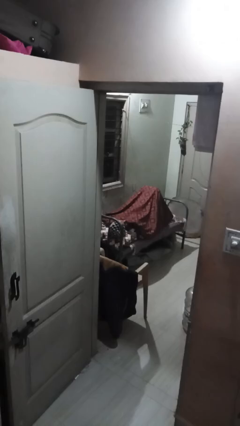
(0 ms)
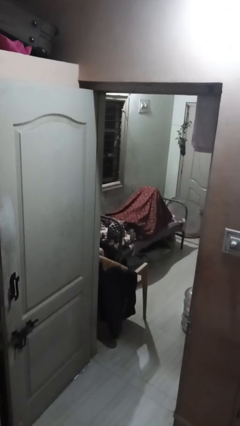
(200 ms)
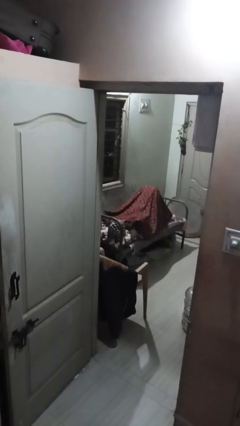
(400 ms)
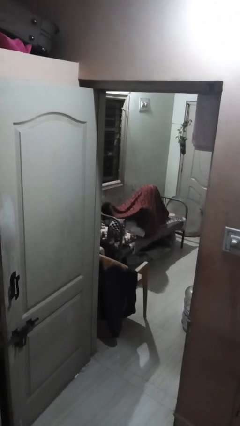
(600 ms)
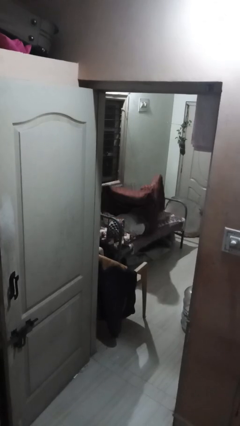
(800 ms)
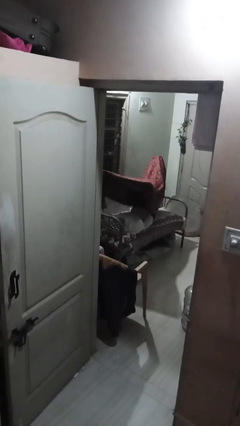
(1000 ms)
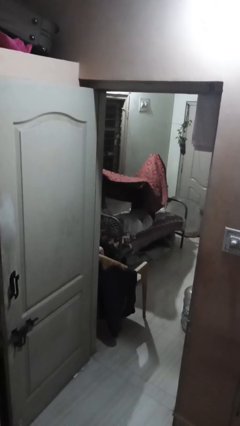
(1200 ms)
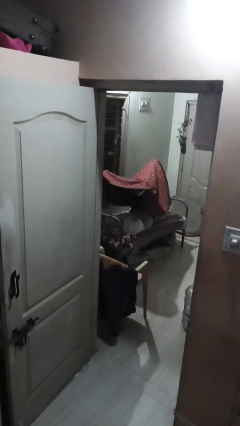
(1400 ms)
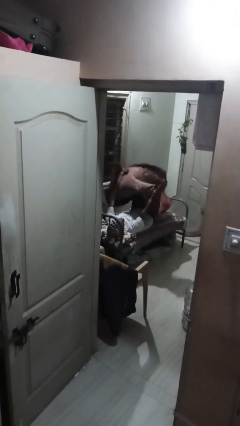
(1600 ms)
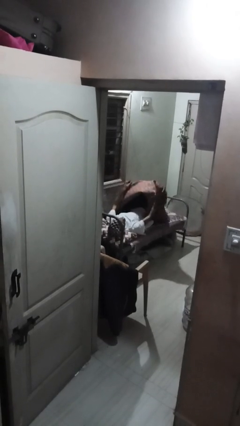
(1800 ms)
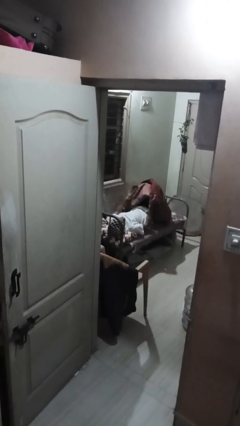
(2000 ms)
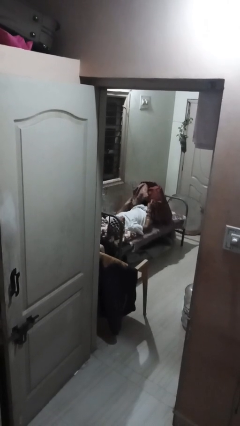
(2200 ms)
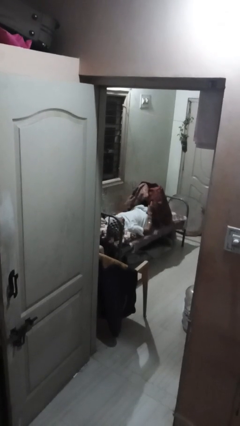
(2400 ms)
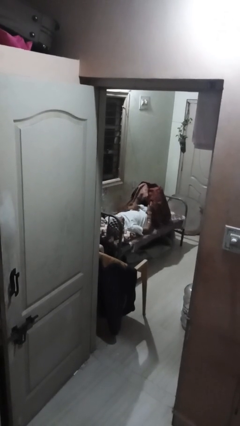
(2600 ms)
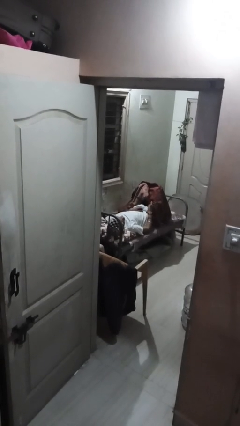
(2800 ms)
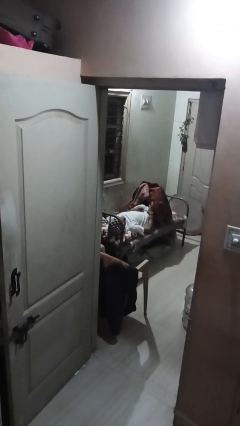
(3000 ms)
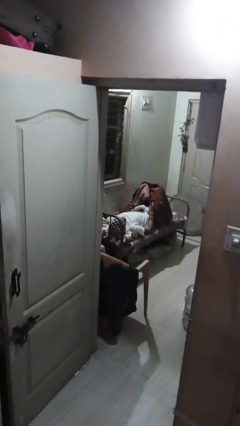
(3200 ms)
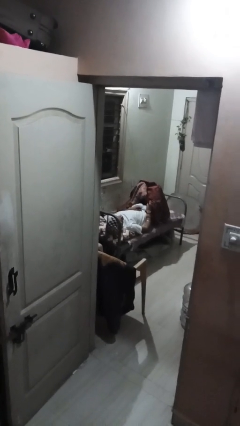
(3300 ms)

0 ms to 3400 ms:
person uncovers with bedsheets

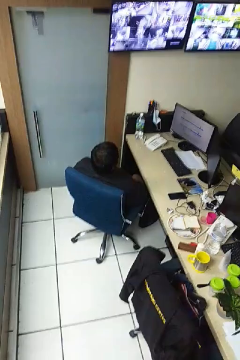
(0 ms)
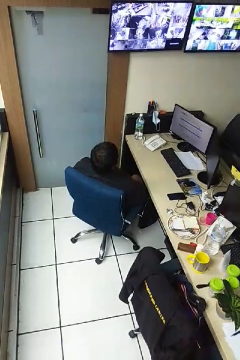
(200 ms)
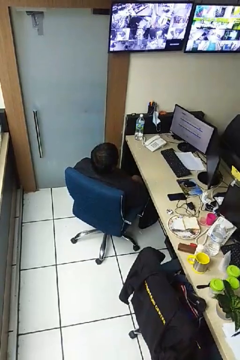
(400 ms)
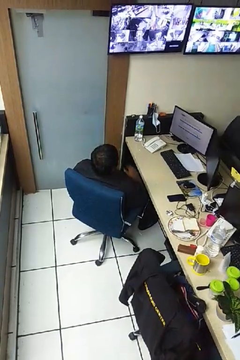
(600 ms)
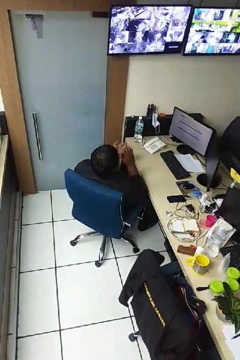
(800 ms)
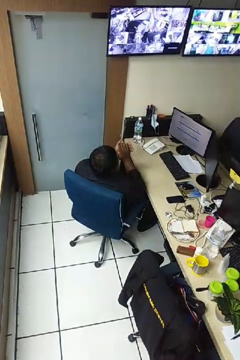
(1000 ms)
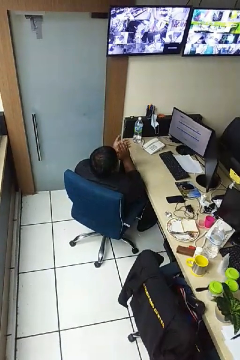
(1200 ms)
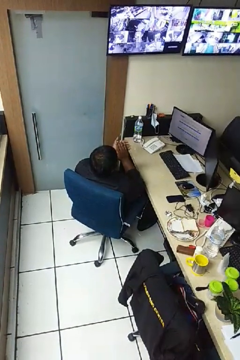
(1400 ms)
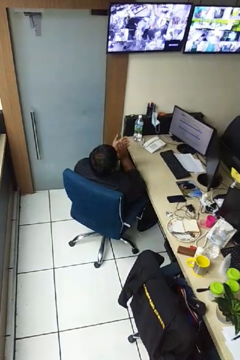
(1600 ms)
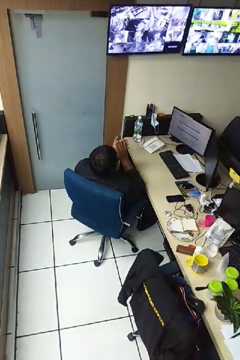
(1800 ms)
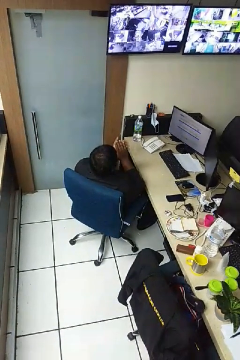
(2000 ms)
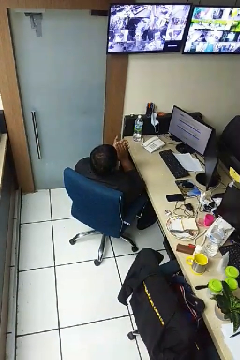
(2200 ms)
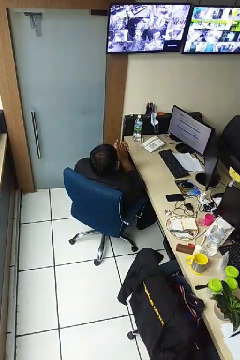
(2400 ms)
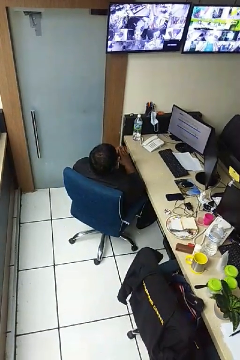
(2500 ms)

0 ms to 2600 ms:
person claps hands

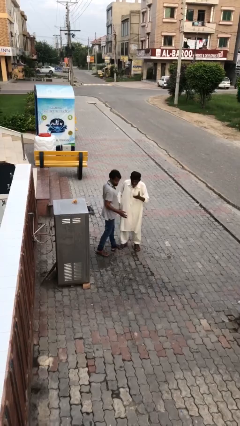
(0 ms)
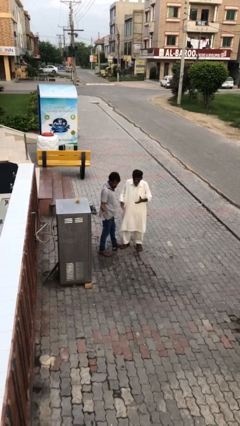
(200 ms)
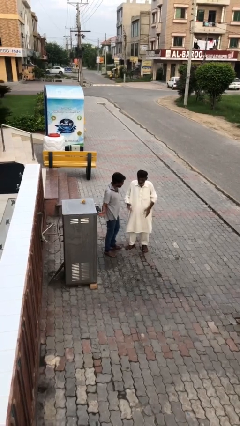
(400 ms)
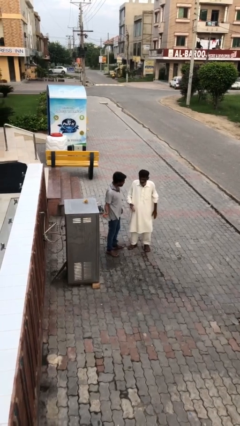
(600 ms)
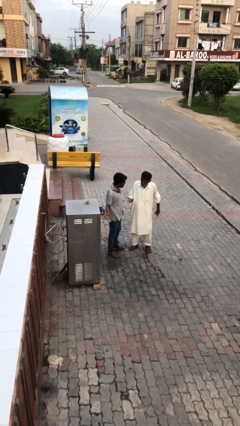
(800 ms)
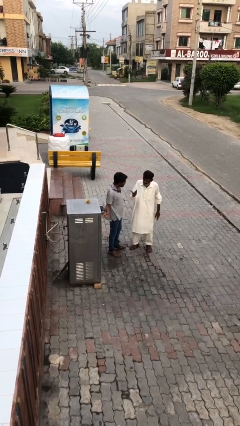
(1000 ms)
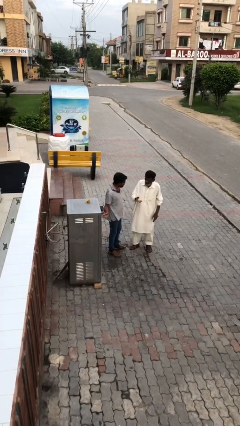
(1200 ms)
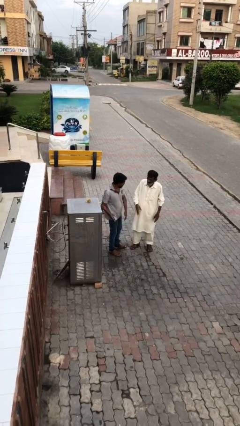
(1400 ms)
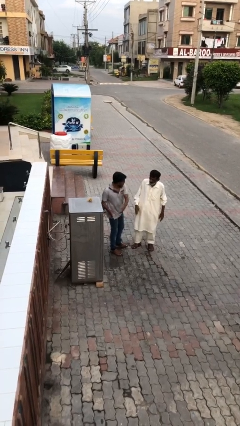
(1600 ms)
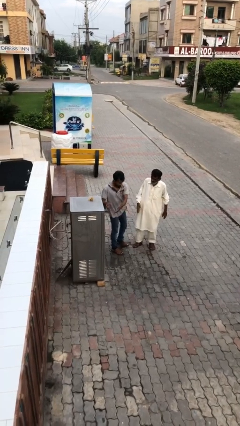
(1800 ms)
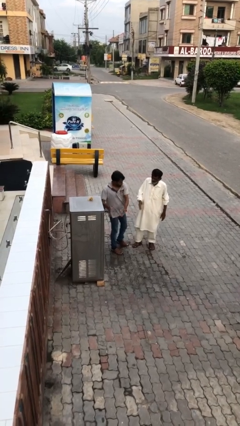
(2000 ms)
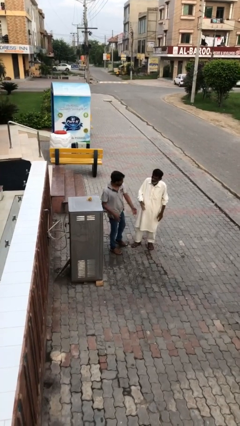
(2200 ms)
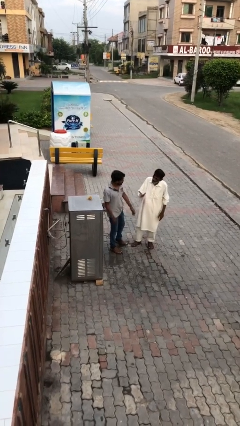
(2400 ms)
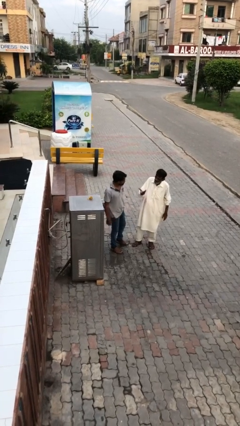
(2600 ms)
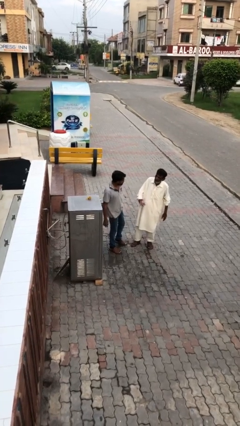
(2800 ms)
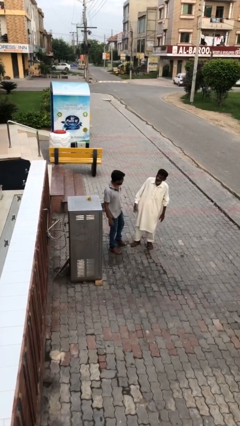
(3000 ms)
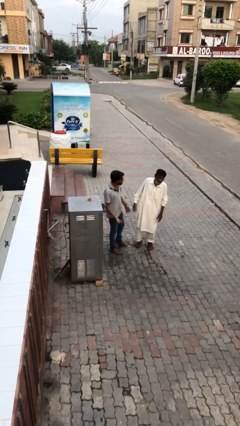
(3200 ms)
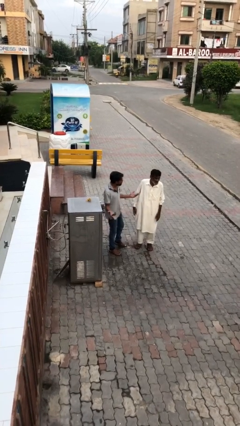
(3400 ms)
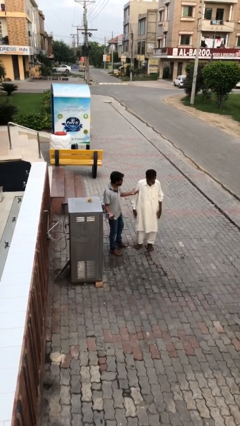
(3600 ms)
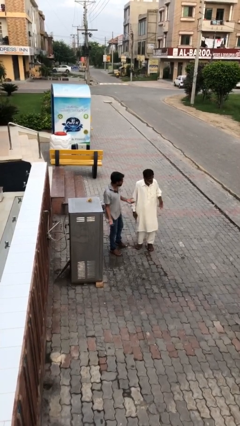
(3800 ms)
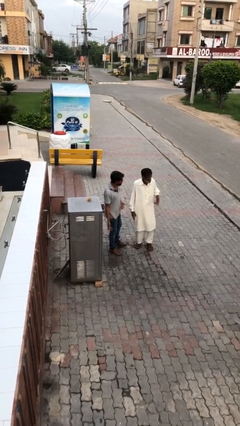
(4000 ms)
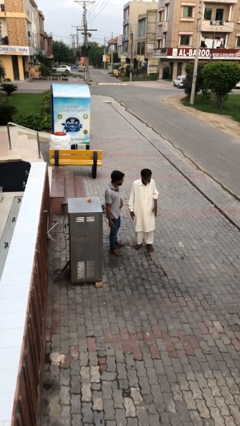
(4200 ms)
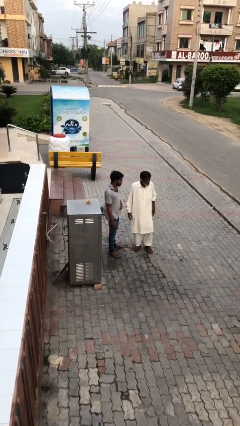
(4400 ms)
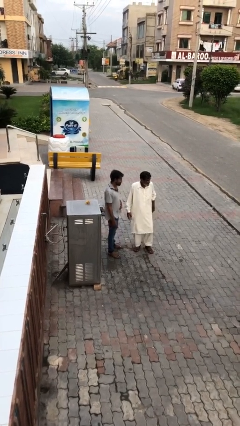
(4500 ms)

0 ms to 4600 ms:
person talks to person

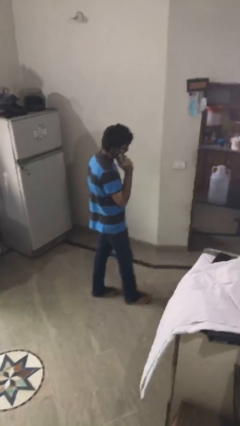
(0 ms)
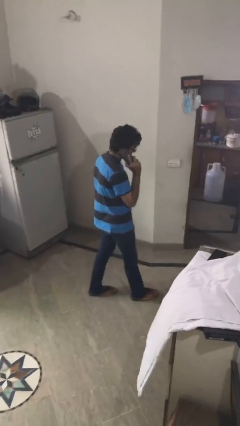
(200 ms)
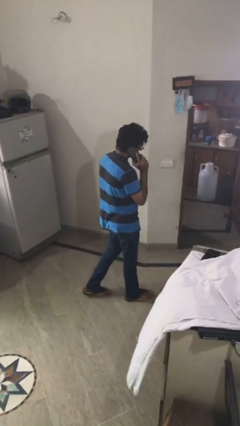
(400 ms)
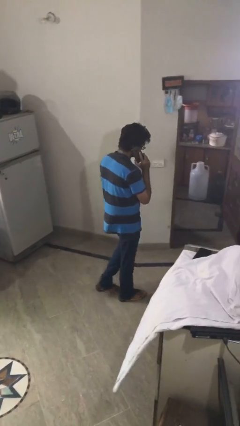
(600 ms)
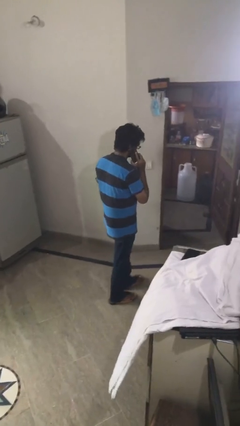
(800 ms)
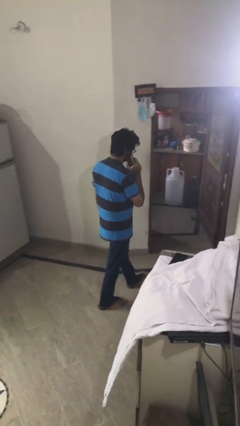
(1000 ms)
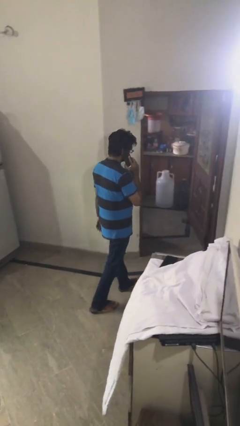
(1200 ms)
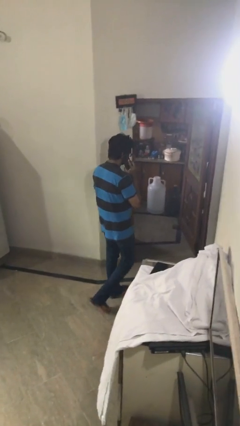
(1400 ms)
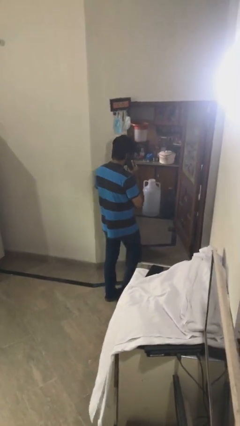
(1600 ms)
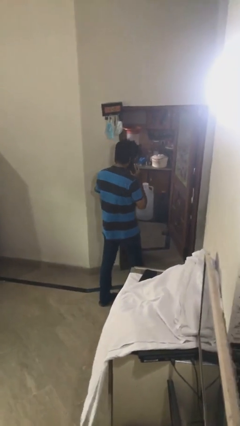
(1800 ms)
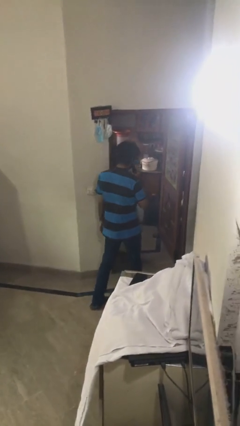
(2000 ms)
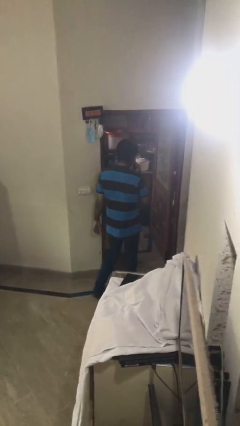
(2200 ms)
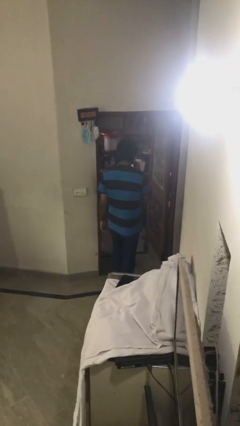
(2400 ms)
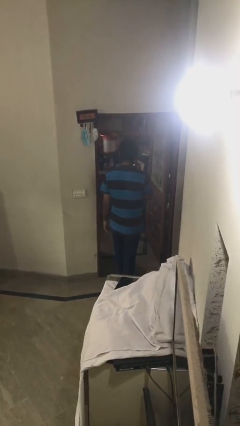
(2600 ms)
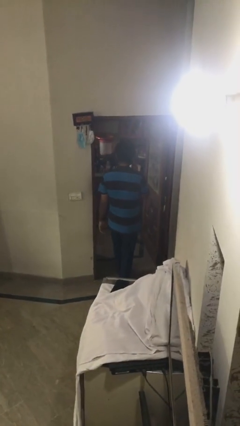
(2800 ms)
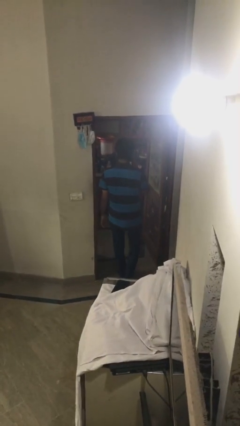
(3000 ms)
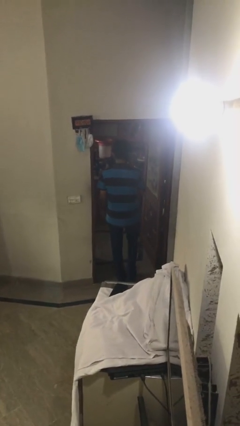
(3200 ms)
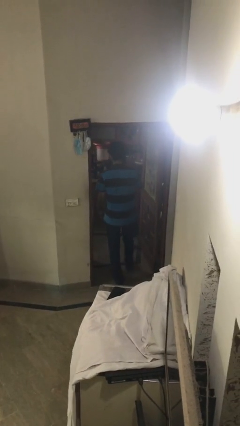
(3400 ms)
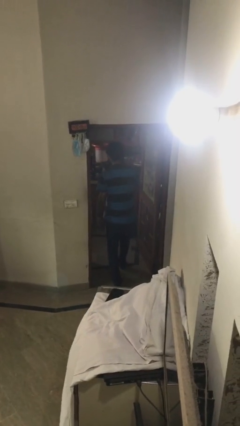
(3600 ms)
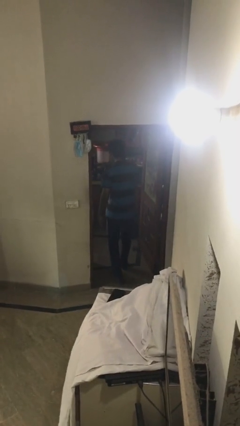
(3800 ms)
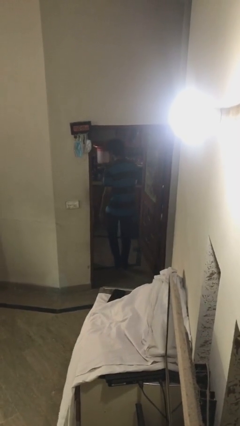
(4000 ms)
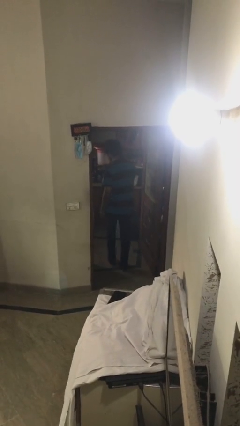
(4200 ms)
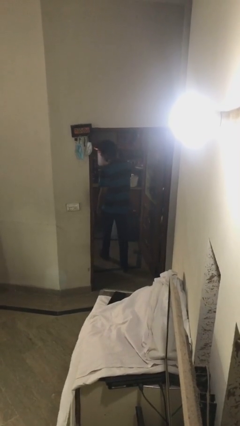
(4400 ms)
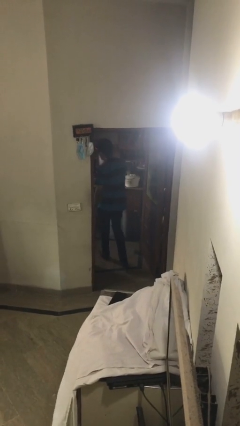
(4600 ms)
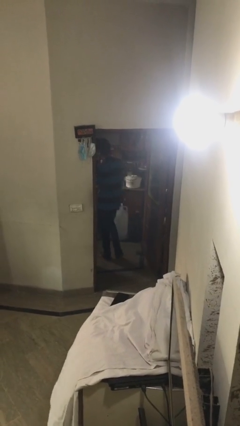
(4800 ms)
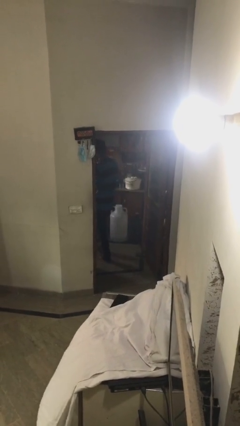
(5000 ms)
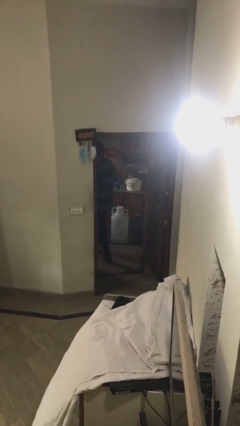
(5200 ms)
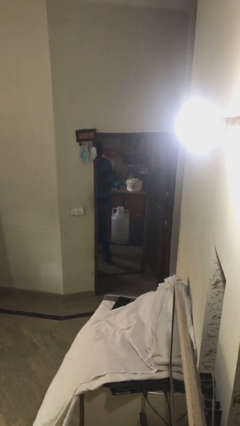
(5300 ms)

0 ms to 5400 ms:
person exits scene through structure

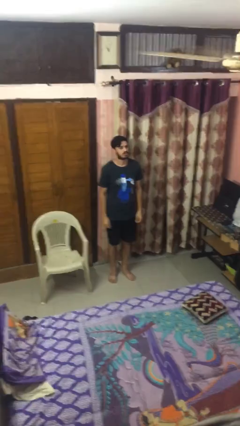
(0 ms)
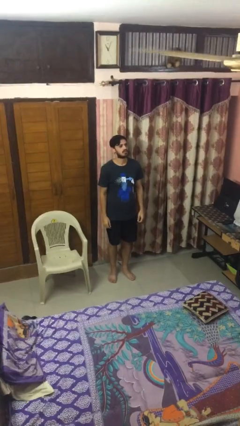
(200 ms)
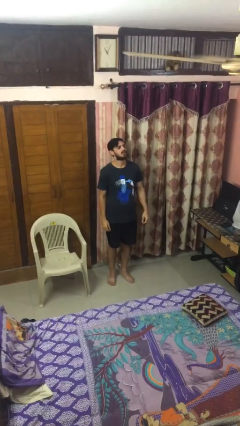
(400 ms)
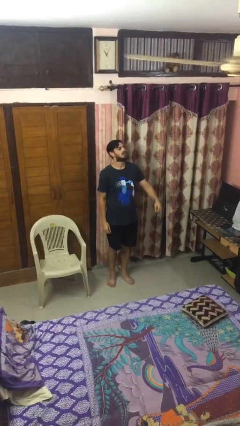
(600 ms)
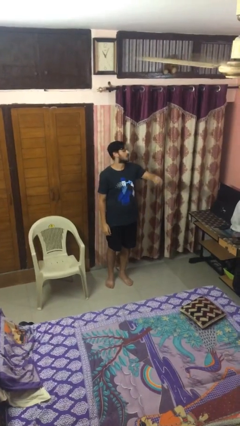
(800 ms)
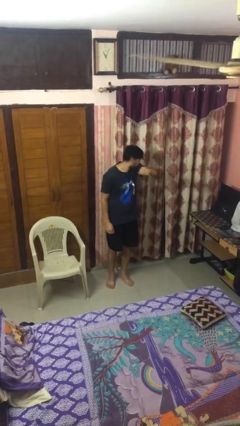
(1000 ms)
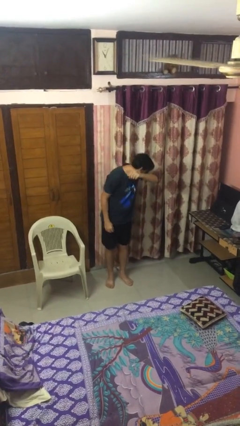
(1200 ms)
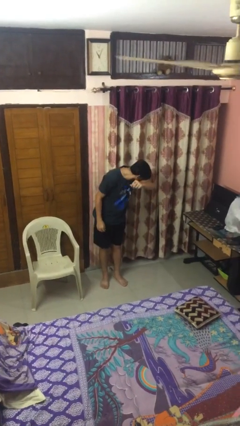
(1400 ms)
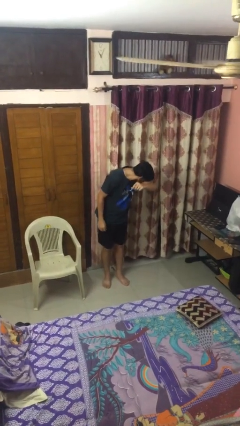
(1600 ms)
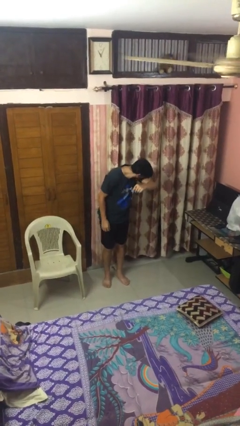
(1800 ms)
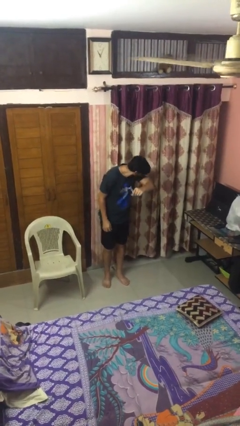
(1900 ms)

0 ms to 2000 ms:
person sneezes into arm

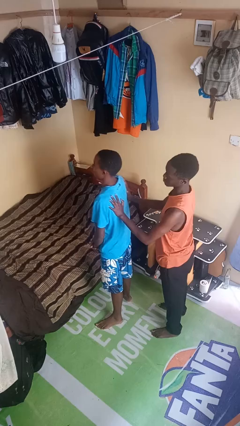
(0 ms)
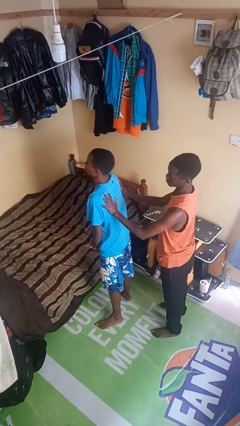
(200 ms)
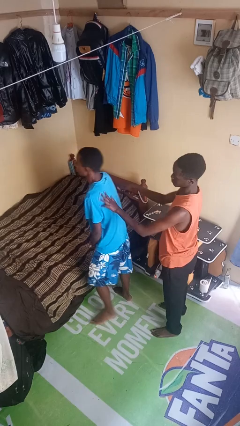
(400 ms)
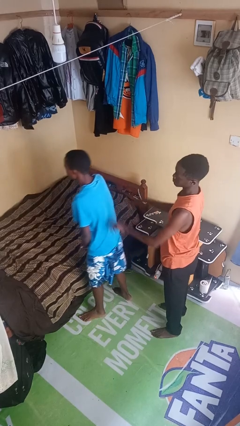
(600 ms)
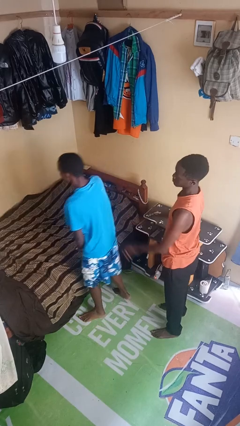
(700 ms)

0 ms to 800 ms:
person shoves person
